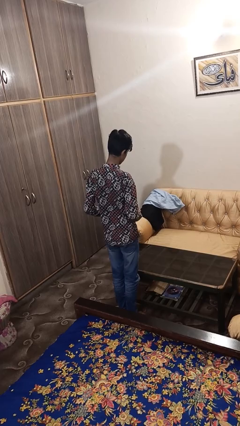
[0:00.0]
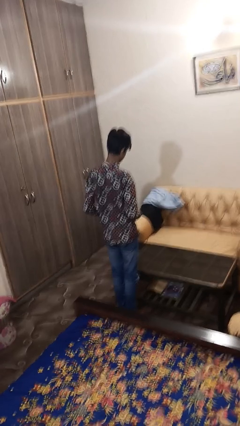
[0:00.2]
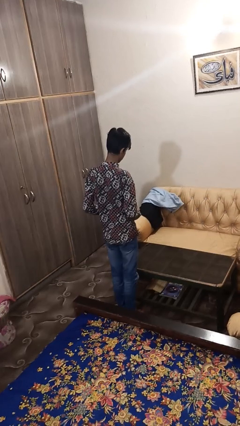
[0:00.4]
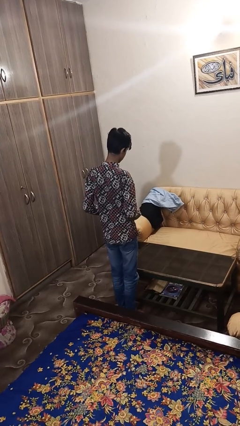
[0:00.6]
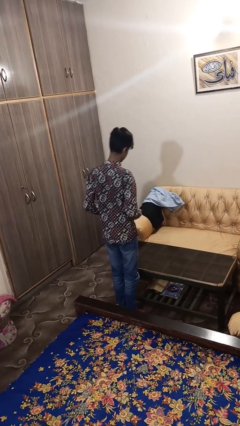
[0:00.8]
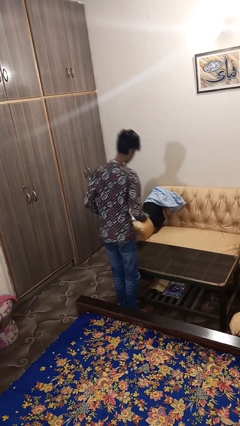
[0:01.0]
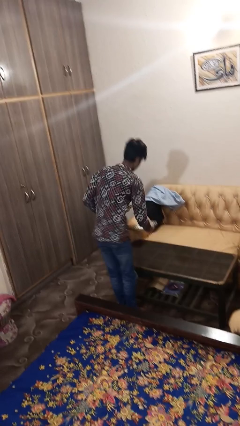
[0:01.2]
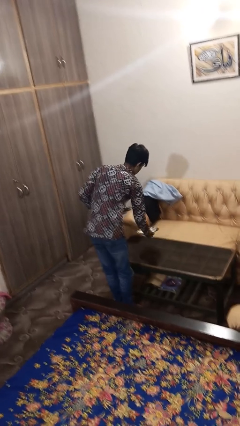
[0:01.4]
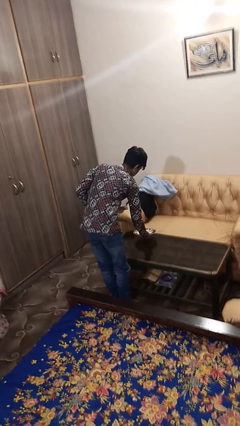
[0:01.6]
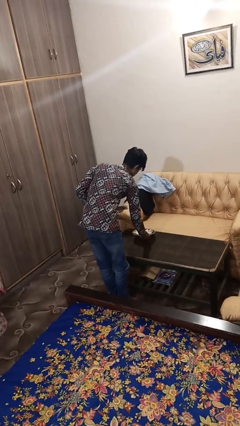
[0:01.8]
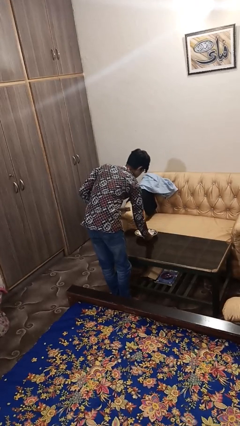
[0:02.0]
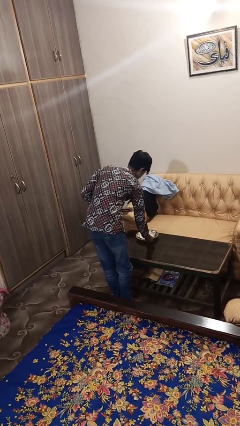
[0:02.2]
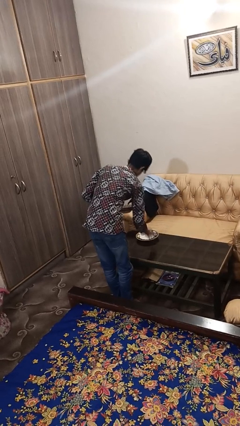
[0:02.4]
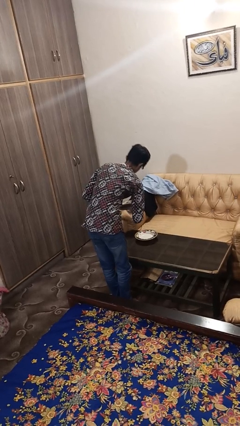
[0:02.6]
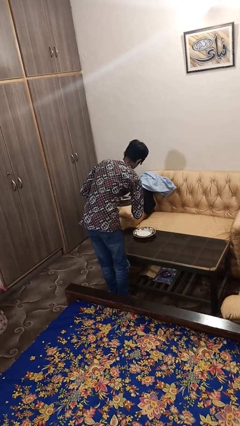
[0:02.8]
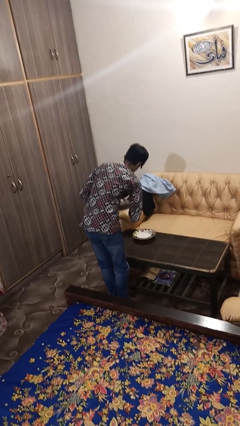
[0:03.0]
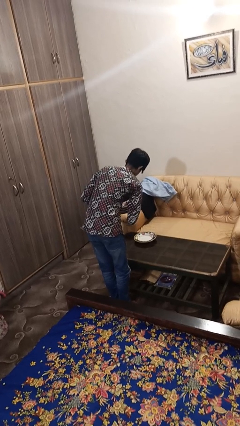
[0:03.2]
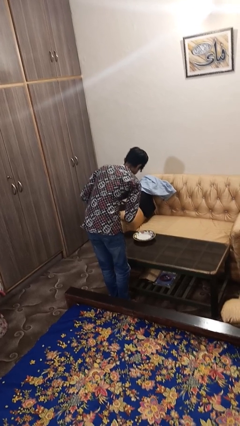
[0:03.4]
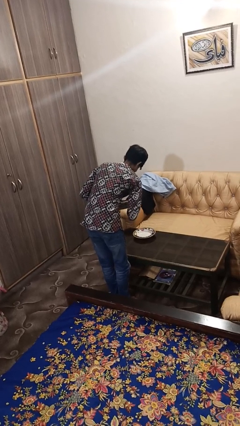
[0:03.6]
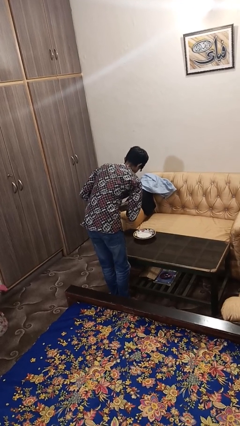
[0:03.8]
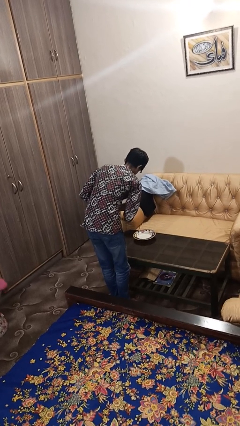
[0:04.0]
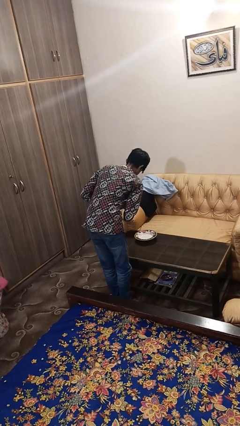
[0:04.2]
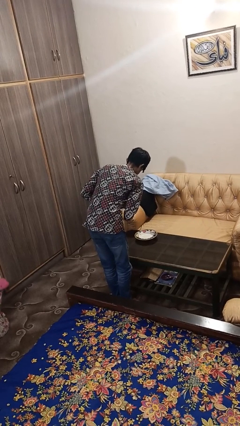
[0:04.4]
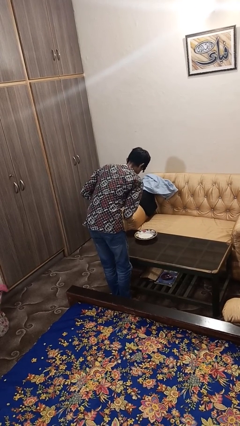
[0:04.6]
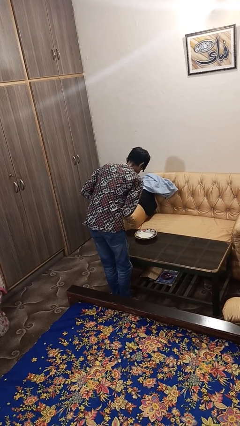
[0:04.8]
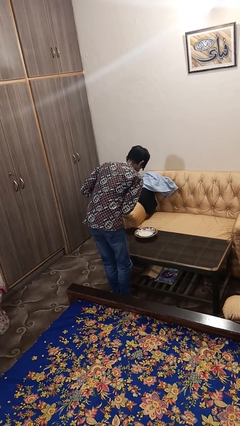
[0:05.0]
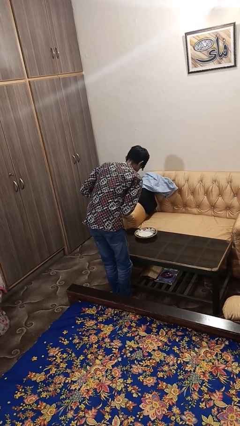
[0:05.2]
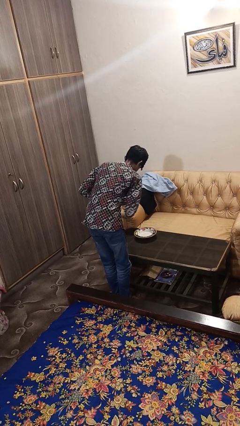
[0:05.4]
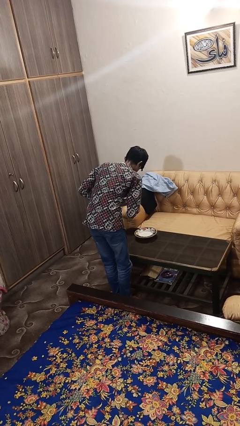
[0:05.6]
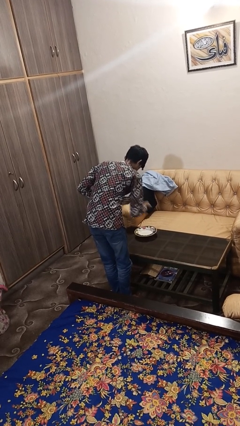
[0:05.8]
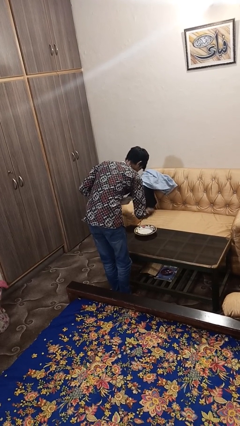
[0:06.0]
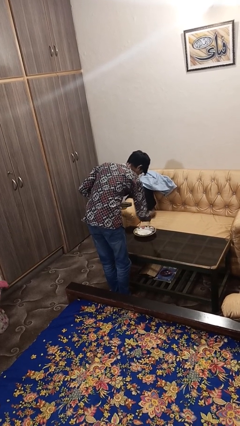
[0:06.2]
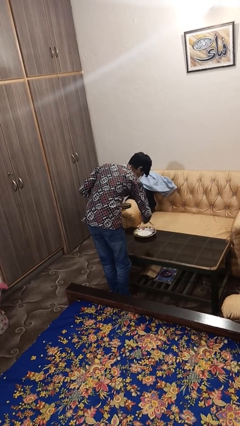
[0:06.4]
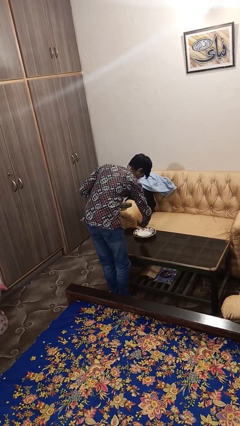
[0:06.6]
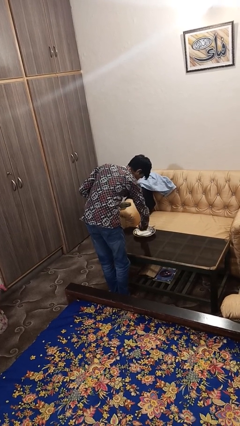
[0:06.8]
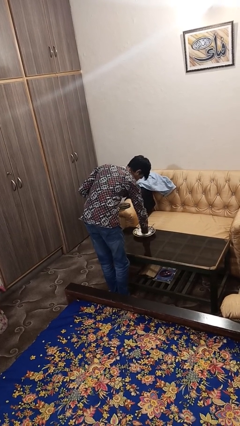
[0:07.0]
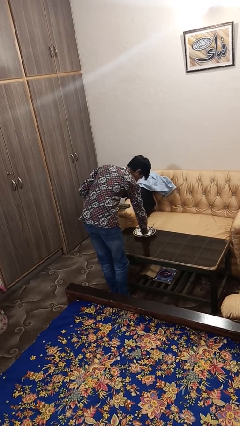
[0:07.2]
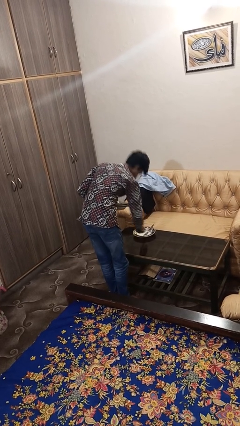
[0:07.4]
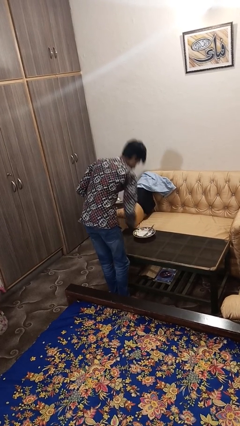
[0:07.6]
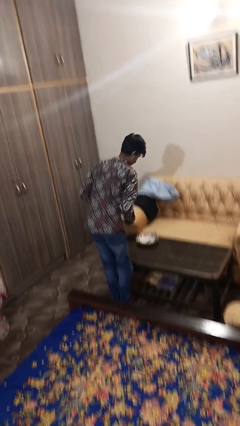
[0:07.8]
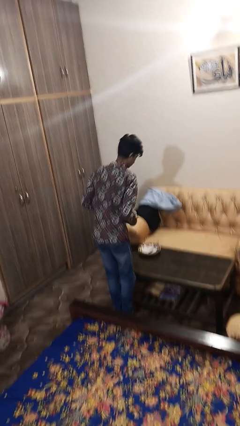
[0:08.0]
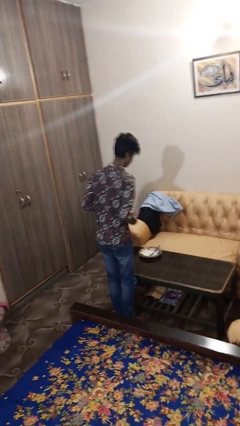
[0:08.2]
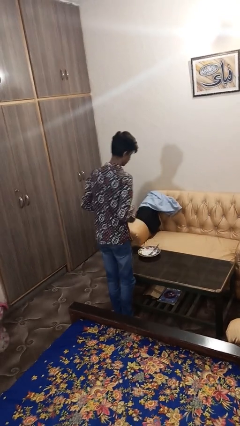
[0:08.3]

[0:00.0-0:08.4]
person sets table

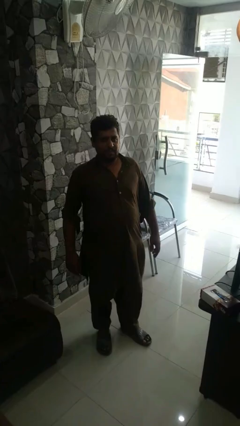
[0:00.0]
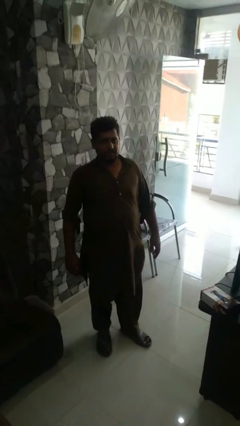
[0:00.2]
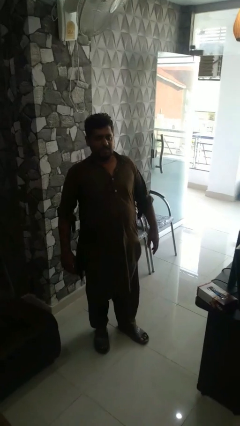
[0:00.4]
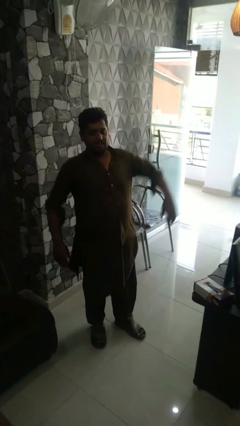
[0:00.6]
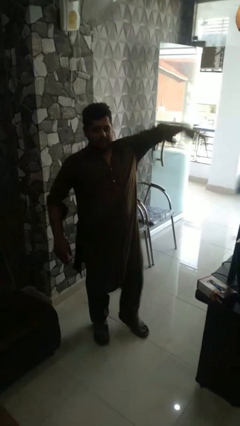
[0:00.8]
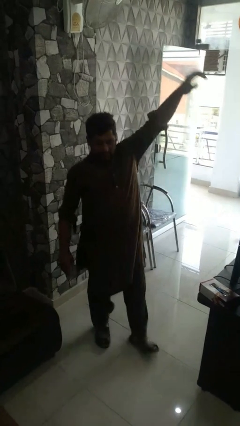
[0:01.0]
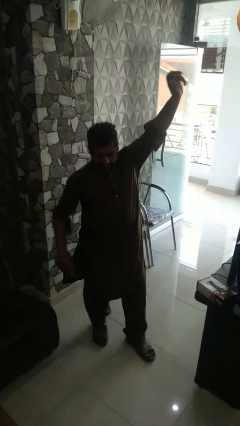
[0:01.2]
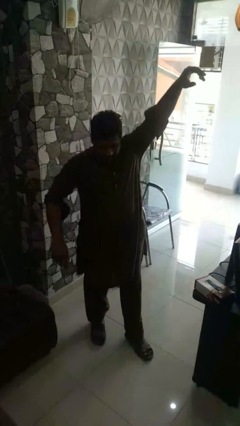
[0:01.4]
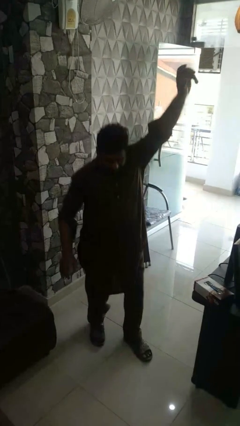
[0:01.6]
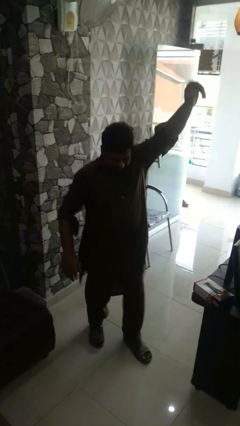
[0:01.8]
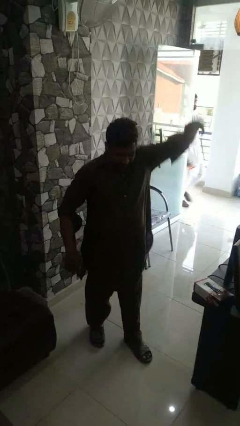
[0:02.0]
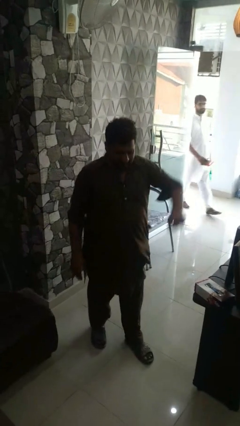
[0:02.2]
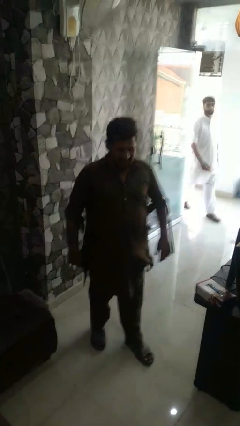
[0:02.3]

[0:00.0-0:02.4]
person dances in place

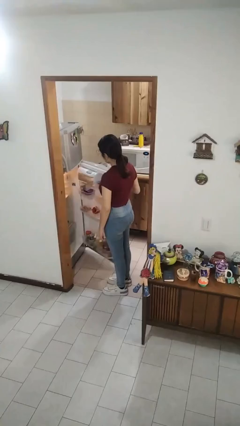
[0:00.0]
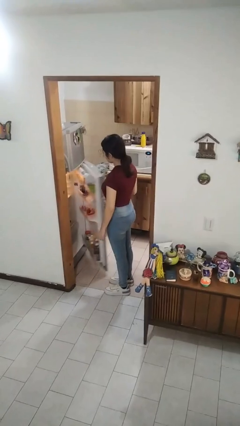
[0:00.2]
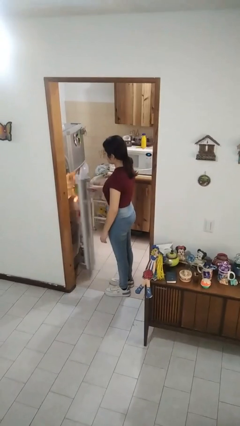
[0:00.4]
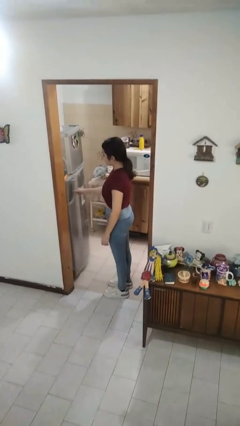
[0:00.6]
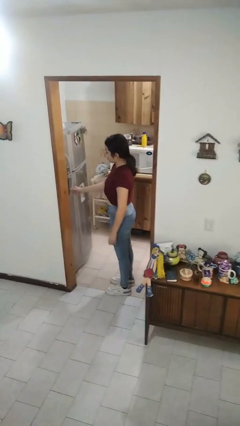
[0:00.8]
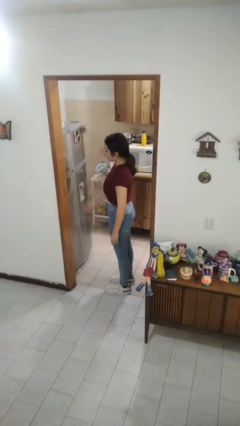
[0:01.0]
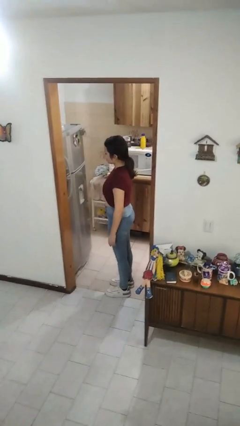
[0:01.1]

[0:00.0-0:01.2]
person closes refrigerator

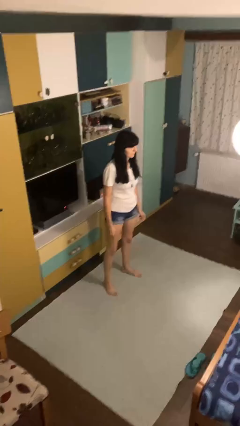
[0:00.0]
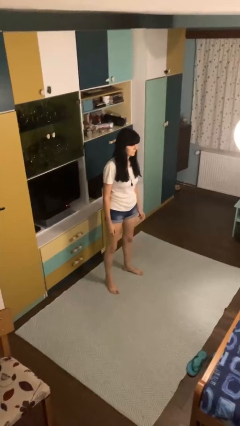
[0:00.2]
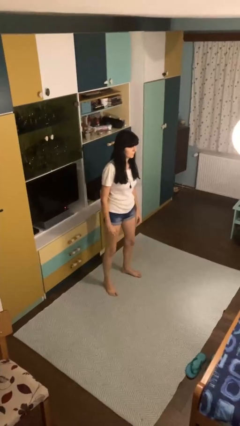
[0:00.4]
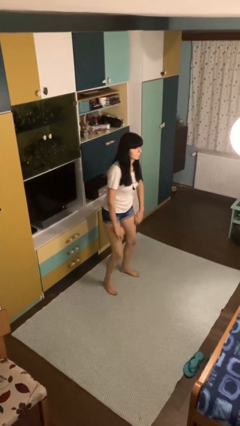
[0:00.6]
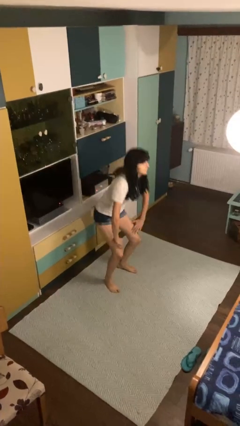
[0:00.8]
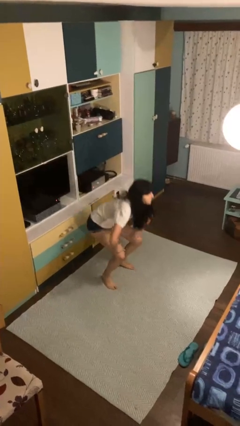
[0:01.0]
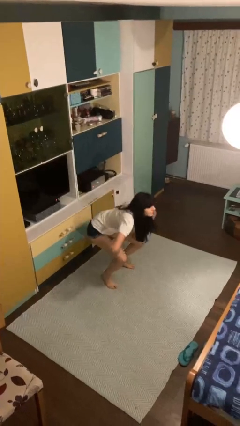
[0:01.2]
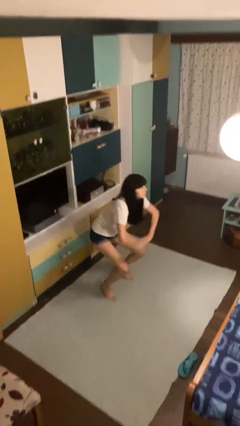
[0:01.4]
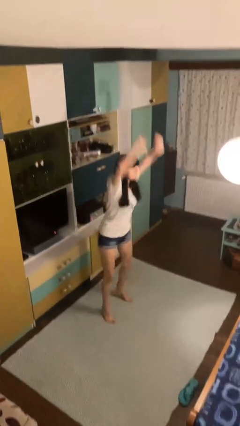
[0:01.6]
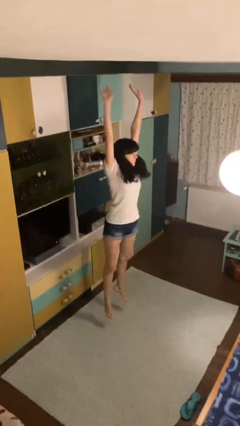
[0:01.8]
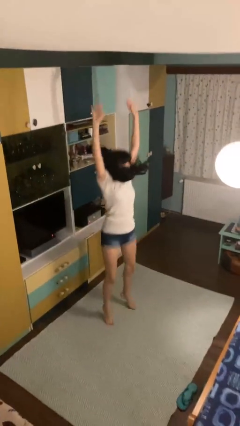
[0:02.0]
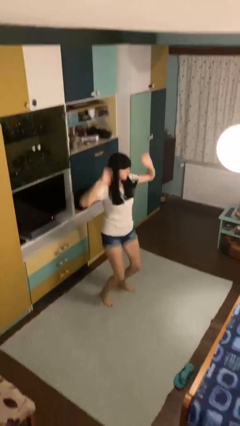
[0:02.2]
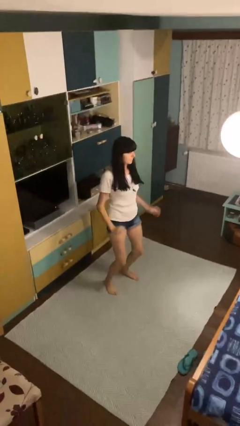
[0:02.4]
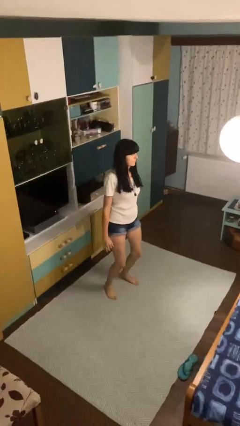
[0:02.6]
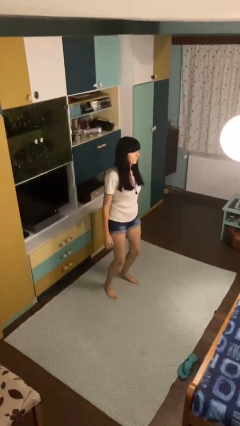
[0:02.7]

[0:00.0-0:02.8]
person jumps

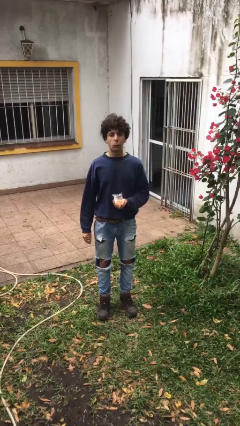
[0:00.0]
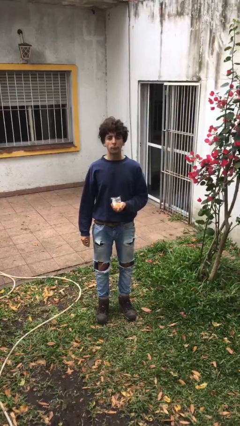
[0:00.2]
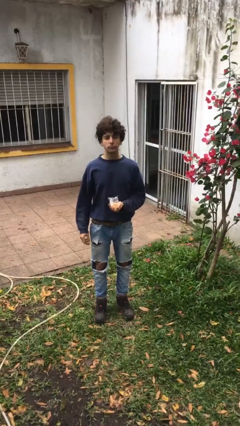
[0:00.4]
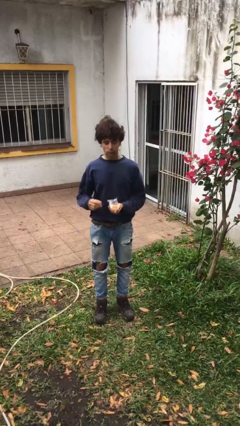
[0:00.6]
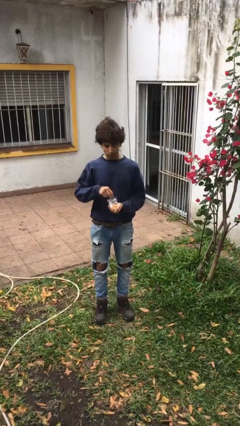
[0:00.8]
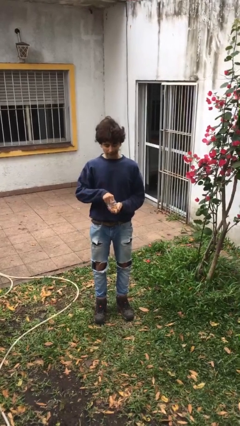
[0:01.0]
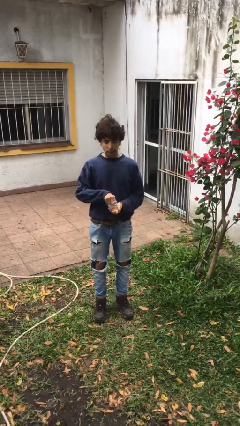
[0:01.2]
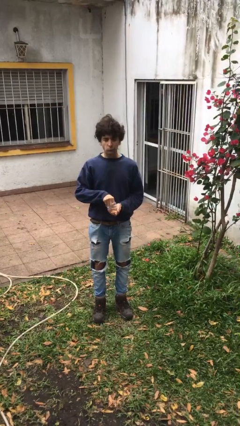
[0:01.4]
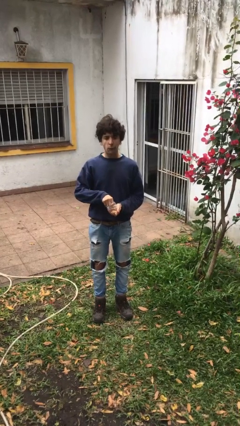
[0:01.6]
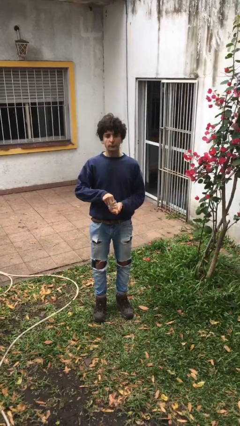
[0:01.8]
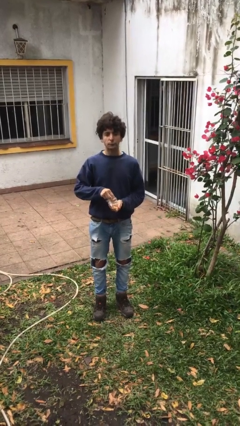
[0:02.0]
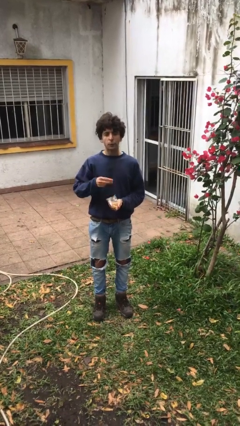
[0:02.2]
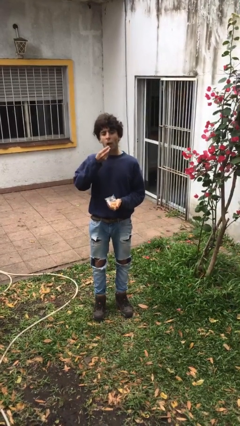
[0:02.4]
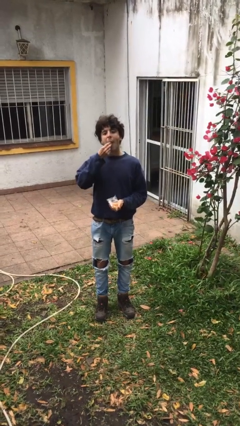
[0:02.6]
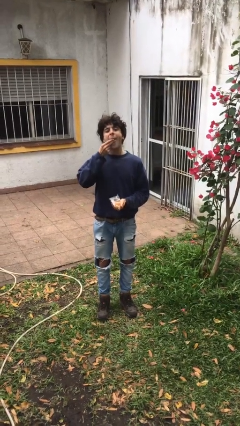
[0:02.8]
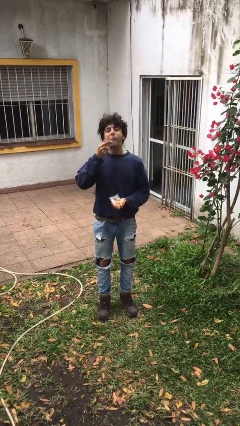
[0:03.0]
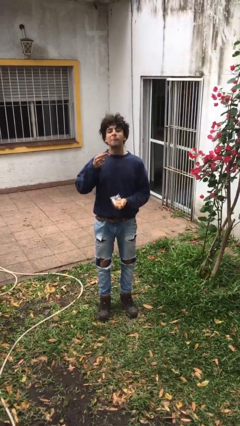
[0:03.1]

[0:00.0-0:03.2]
person eats snack from bag
